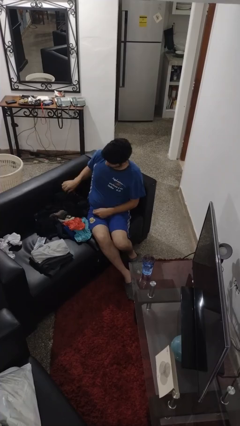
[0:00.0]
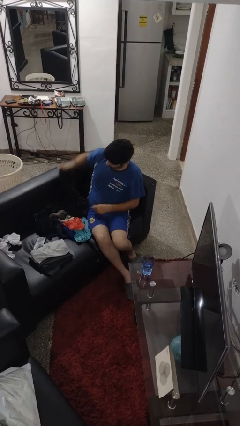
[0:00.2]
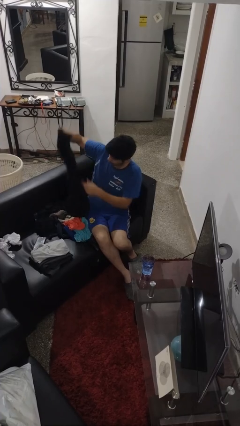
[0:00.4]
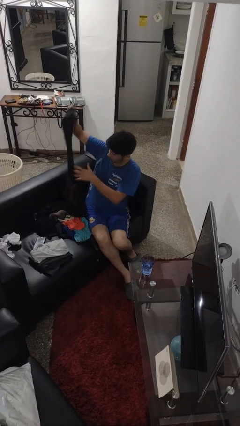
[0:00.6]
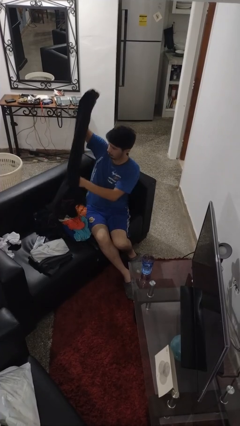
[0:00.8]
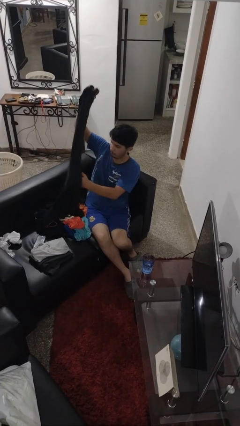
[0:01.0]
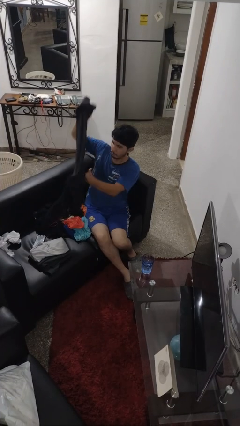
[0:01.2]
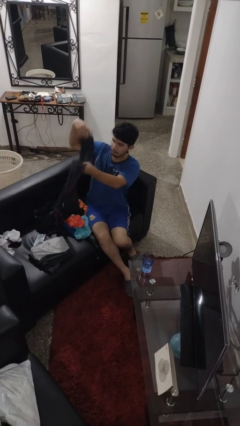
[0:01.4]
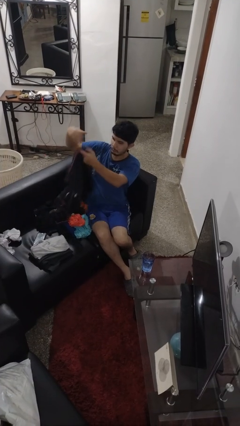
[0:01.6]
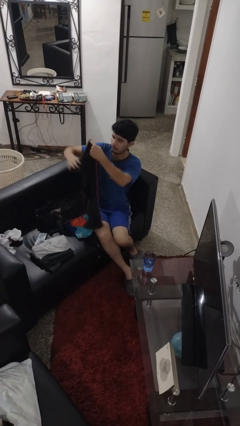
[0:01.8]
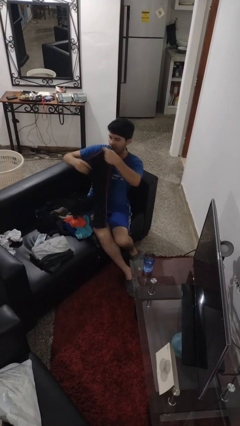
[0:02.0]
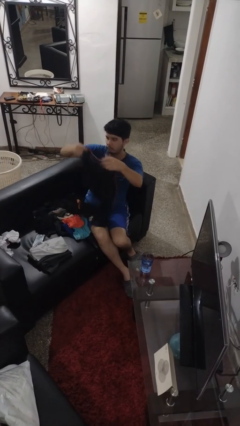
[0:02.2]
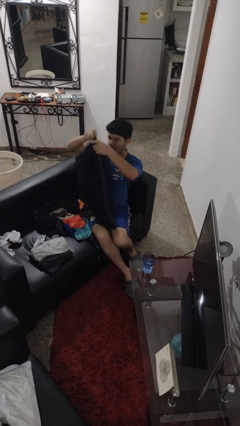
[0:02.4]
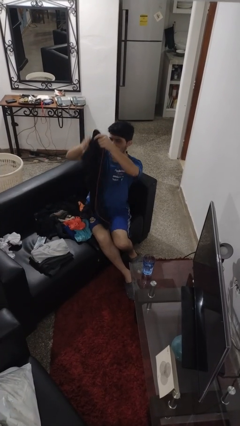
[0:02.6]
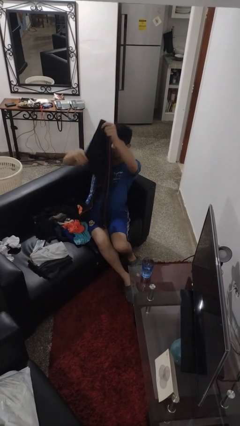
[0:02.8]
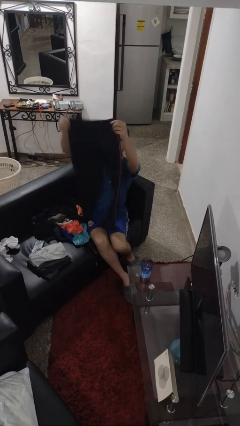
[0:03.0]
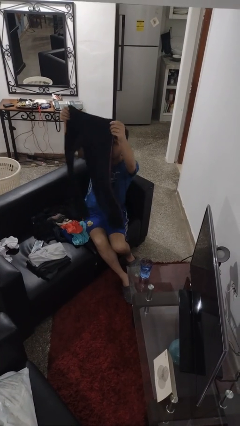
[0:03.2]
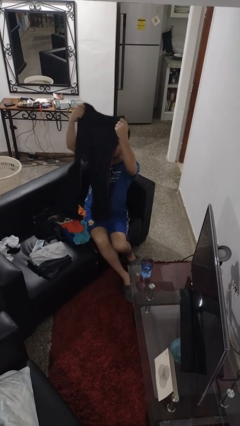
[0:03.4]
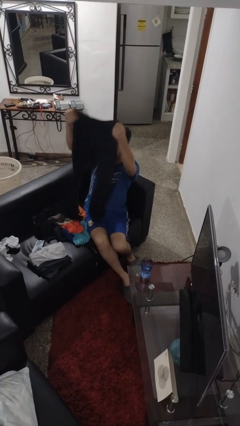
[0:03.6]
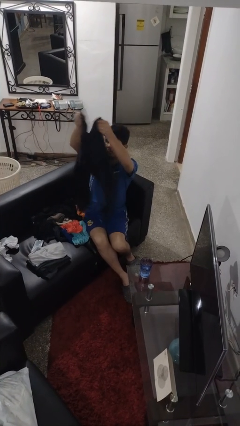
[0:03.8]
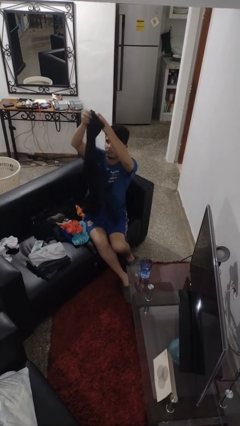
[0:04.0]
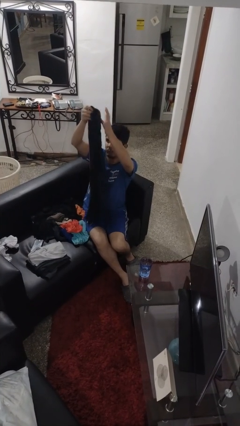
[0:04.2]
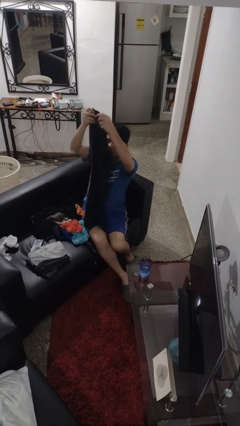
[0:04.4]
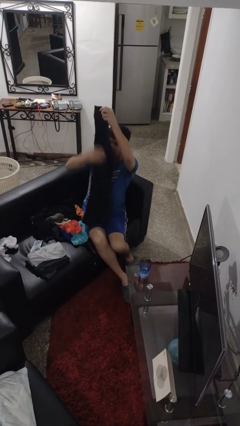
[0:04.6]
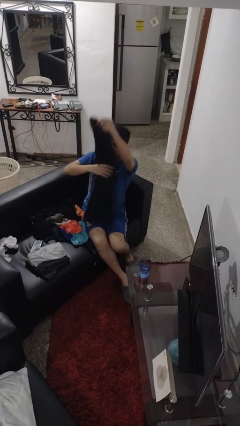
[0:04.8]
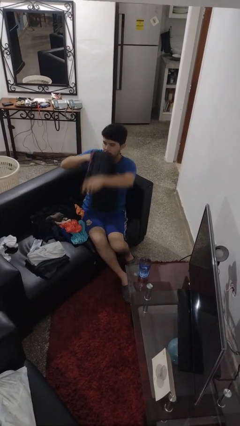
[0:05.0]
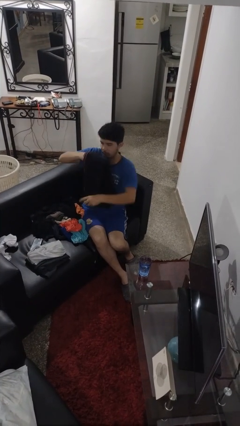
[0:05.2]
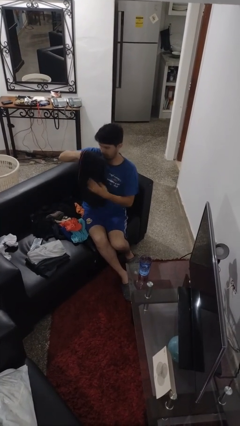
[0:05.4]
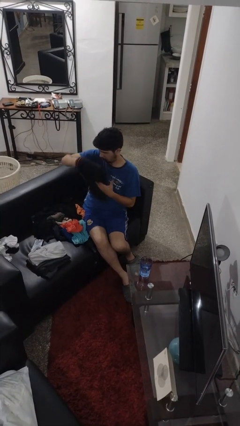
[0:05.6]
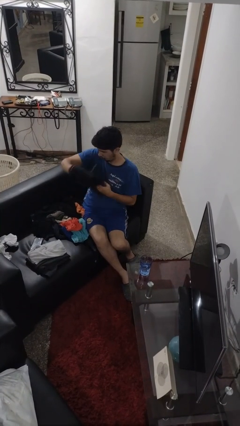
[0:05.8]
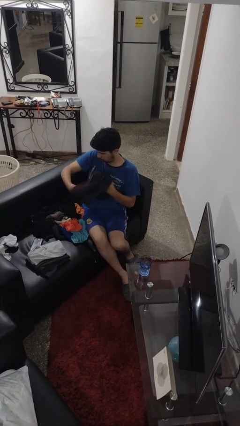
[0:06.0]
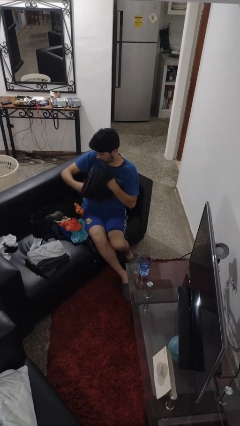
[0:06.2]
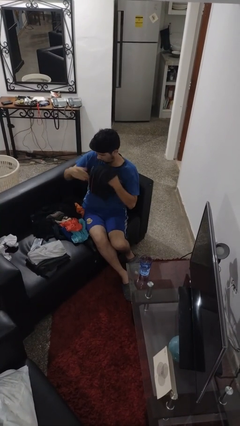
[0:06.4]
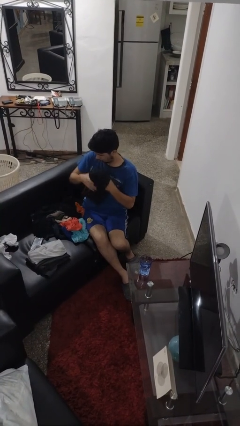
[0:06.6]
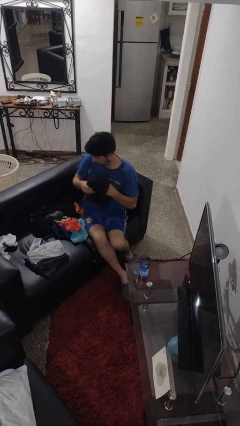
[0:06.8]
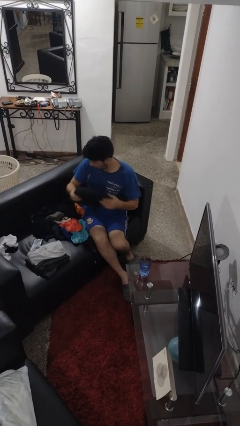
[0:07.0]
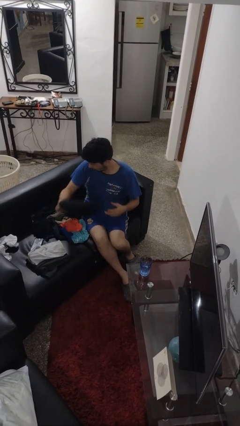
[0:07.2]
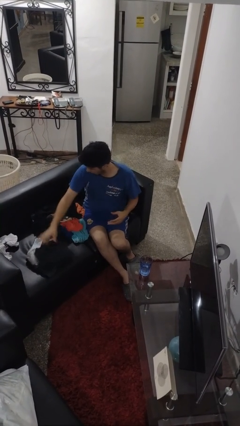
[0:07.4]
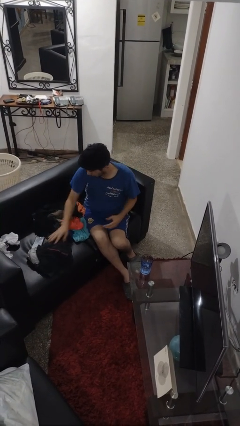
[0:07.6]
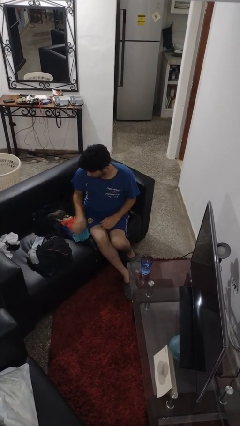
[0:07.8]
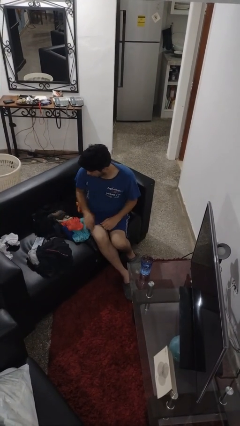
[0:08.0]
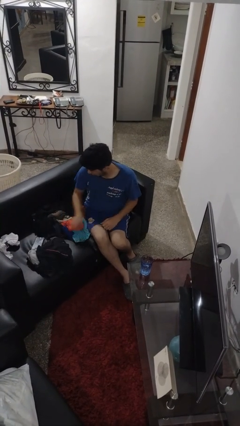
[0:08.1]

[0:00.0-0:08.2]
person folds pants

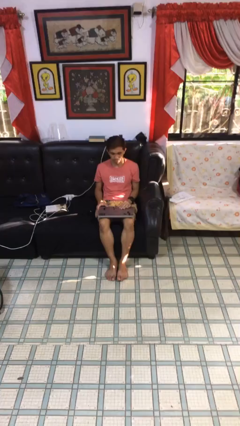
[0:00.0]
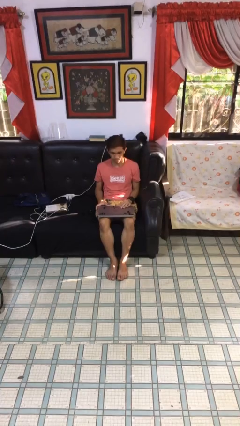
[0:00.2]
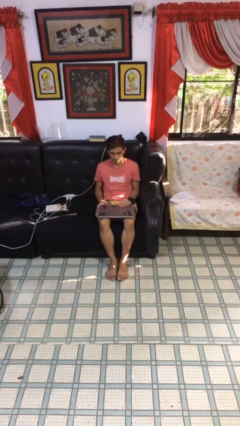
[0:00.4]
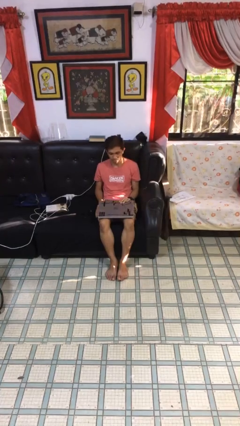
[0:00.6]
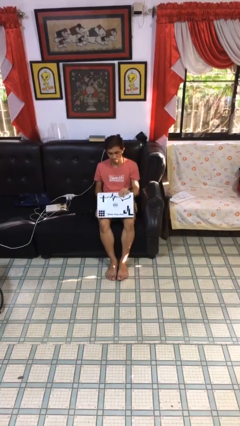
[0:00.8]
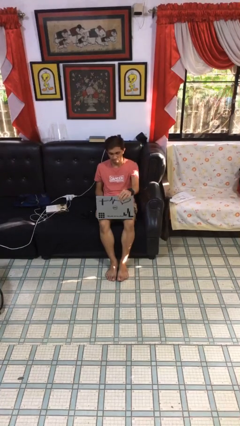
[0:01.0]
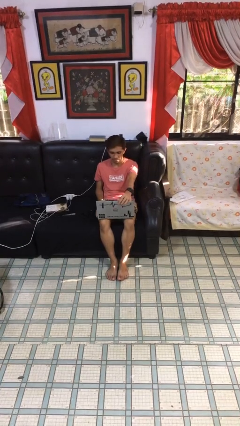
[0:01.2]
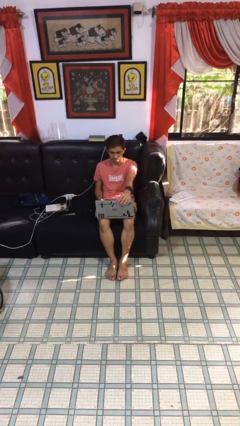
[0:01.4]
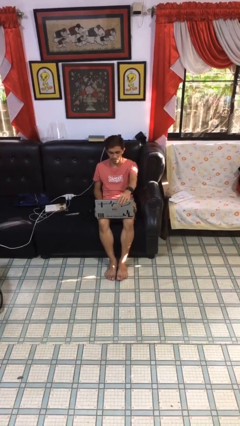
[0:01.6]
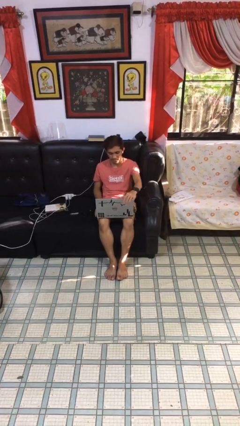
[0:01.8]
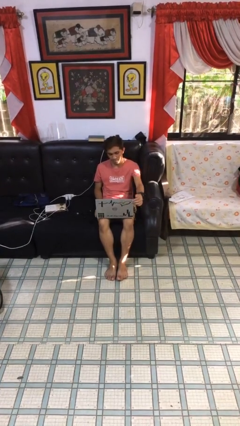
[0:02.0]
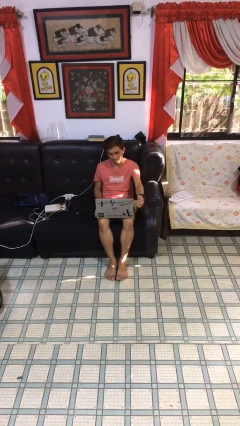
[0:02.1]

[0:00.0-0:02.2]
person interacts with laptop

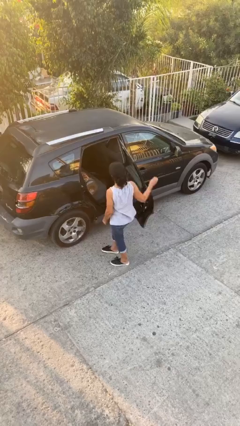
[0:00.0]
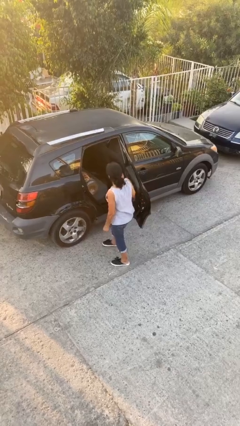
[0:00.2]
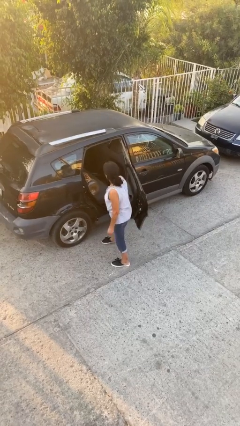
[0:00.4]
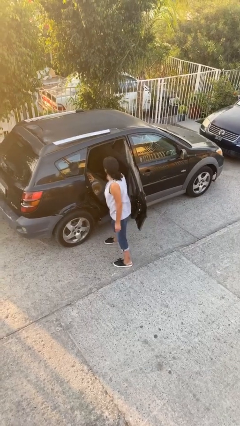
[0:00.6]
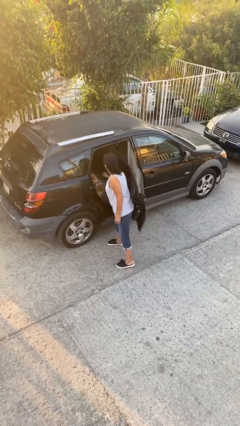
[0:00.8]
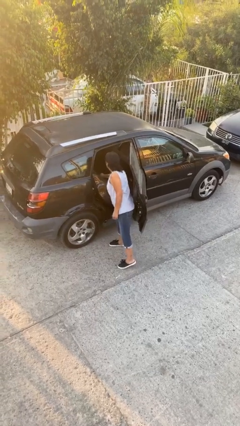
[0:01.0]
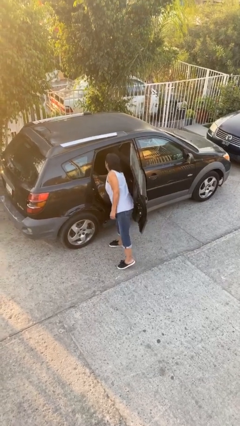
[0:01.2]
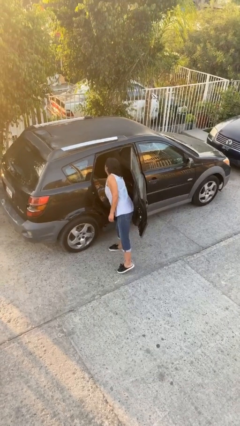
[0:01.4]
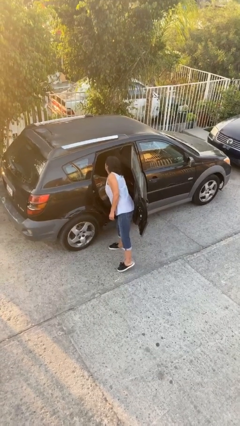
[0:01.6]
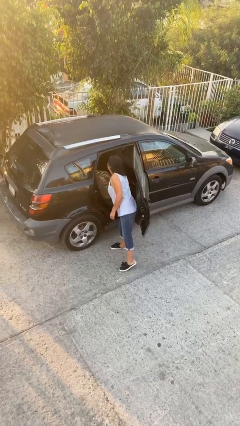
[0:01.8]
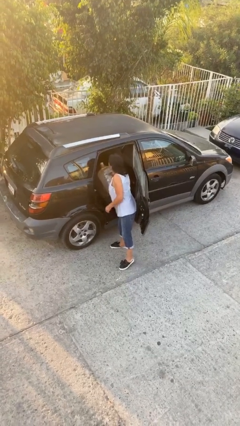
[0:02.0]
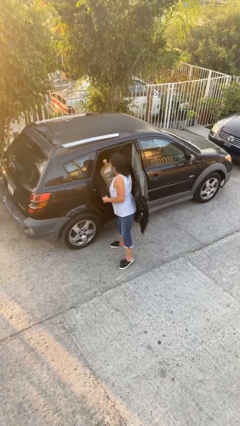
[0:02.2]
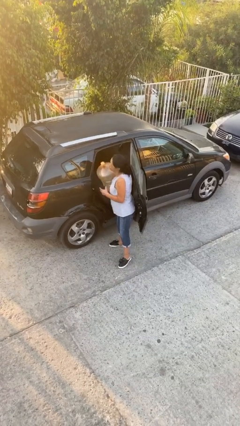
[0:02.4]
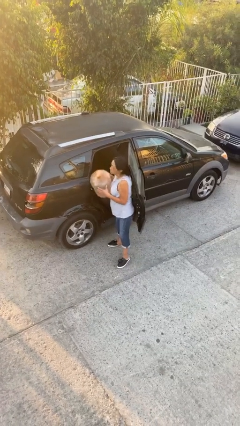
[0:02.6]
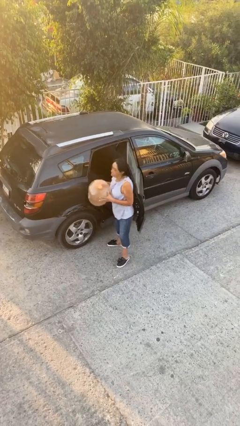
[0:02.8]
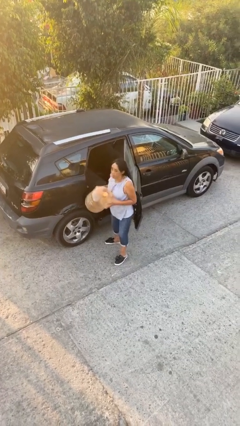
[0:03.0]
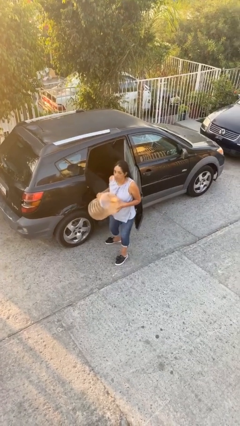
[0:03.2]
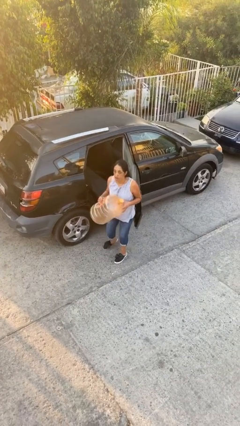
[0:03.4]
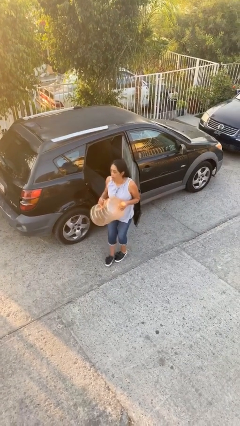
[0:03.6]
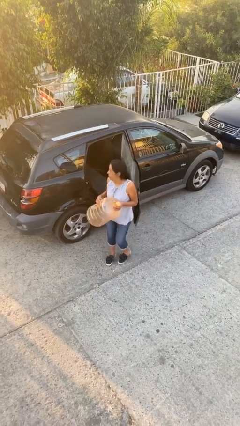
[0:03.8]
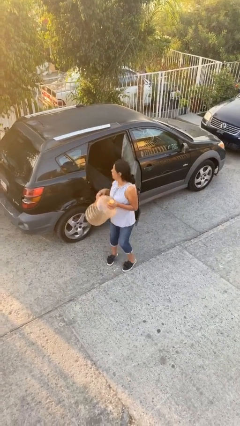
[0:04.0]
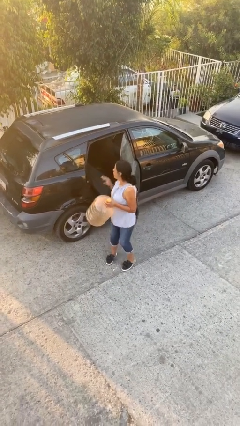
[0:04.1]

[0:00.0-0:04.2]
person unloads car

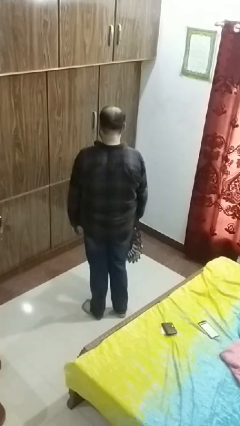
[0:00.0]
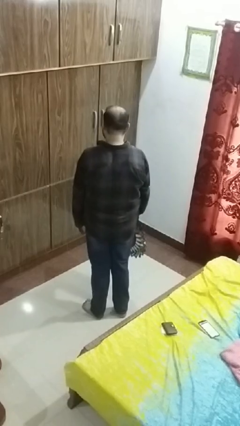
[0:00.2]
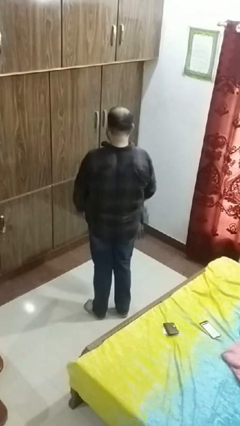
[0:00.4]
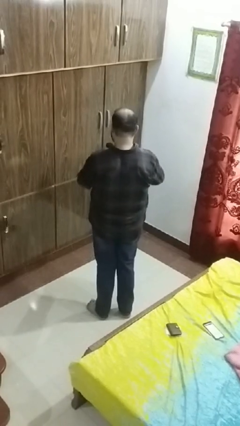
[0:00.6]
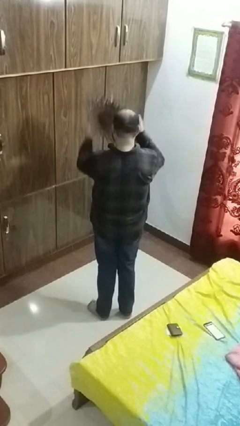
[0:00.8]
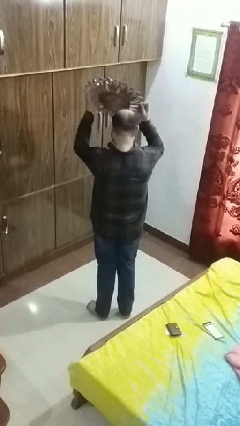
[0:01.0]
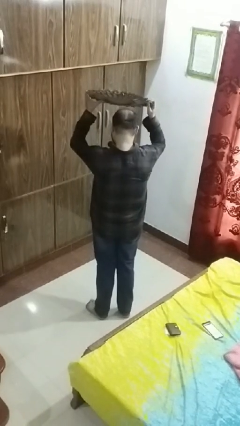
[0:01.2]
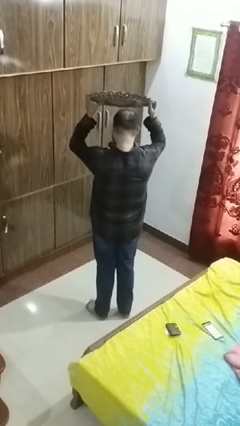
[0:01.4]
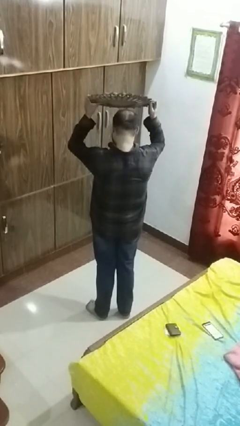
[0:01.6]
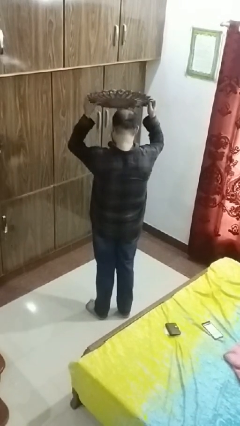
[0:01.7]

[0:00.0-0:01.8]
person holds object above head

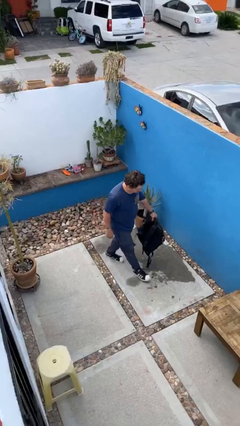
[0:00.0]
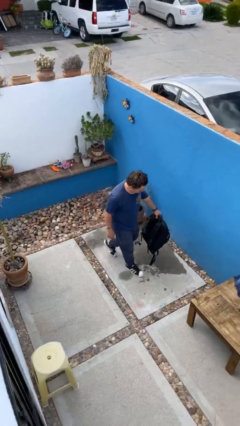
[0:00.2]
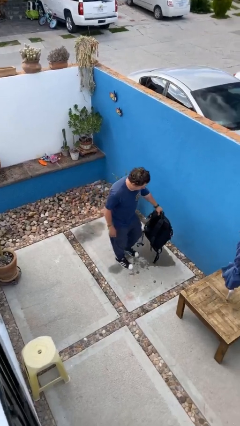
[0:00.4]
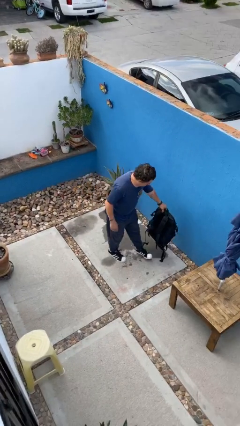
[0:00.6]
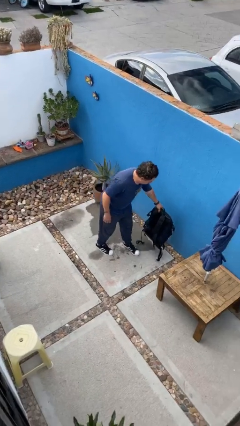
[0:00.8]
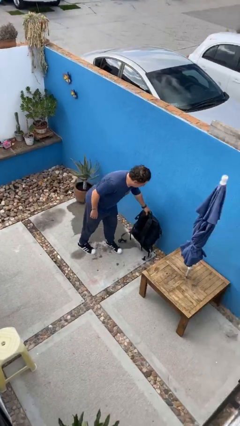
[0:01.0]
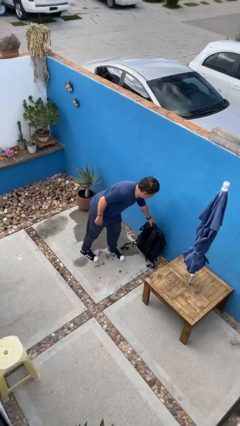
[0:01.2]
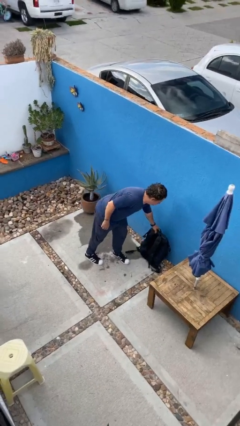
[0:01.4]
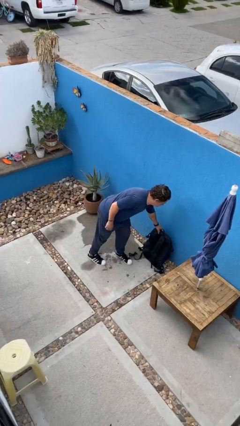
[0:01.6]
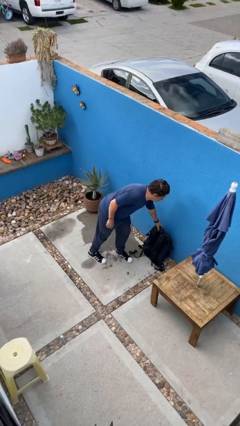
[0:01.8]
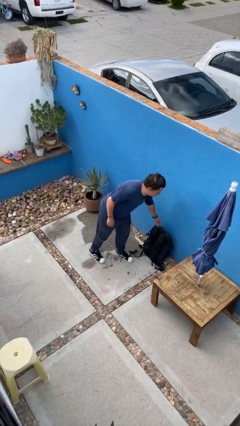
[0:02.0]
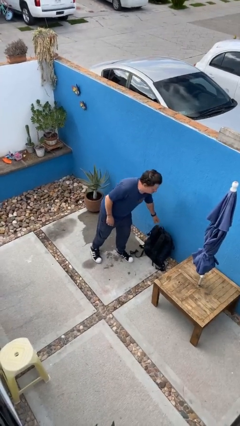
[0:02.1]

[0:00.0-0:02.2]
person puts down object on floor
